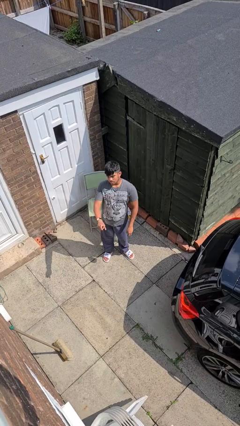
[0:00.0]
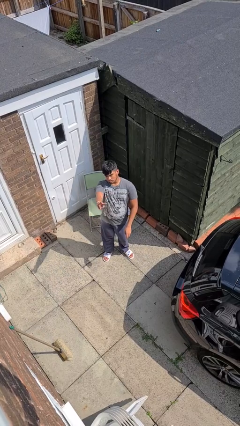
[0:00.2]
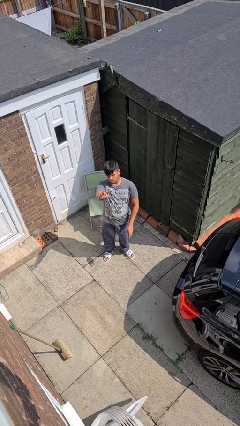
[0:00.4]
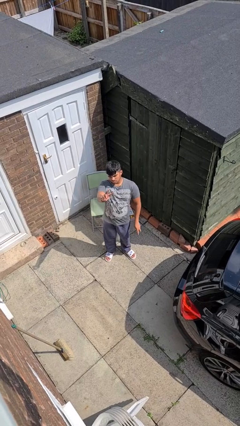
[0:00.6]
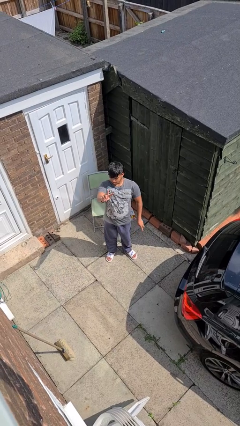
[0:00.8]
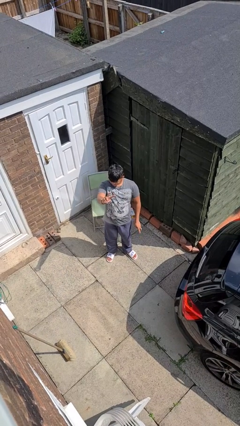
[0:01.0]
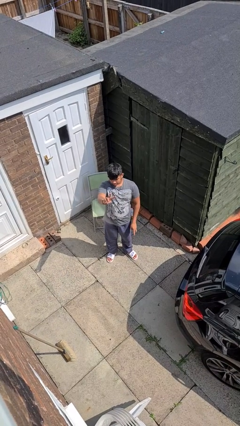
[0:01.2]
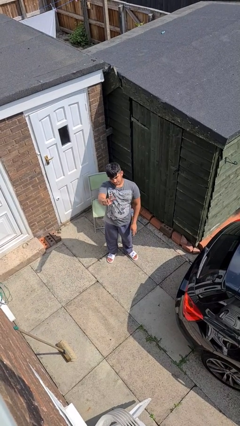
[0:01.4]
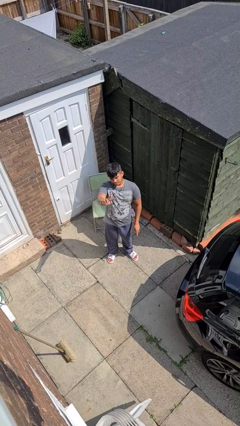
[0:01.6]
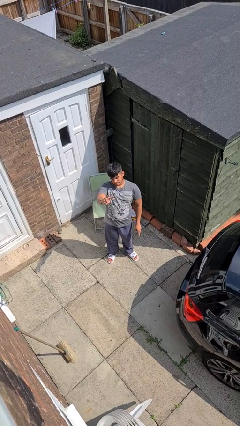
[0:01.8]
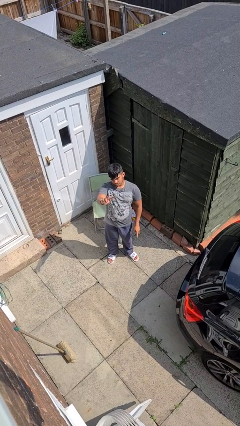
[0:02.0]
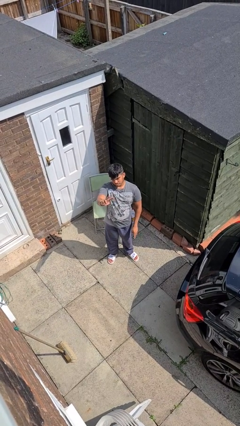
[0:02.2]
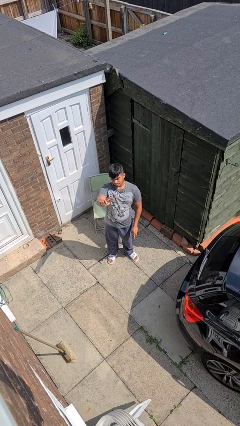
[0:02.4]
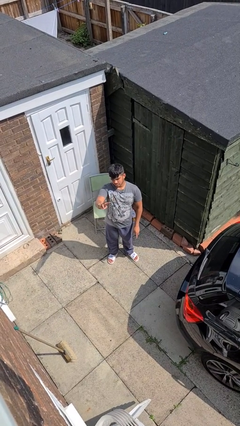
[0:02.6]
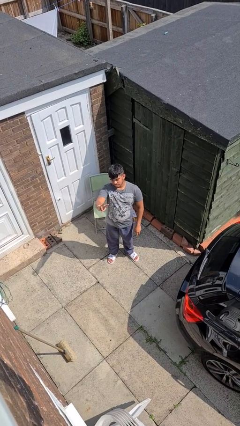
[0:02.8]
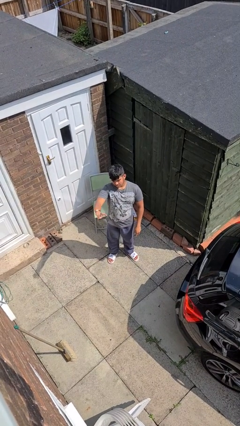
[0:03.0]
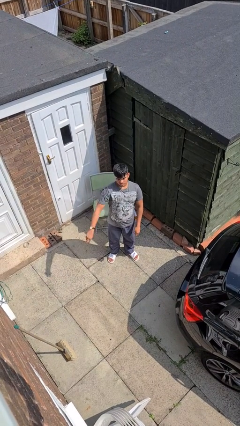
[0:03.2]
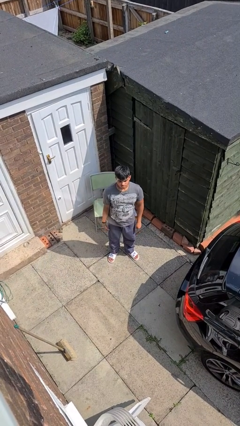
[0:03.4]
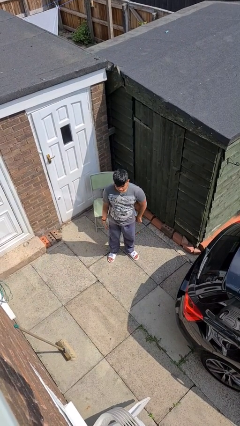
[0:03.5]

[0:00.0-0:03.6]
person gestures peace

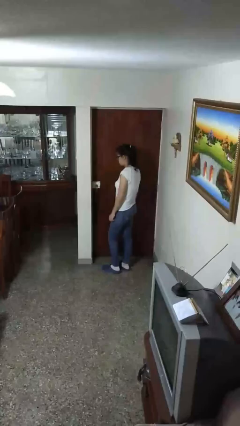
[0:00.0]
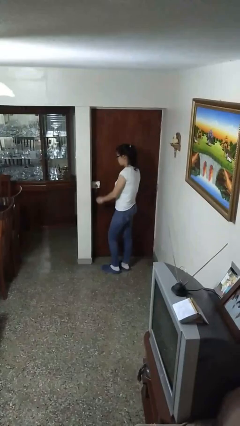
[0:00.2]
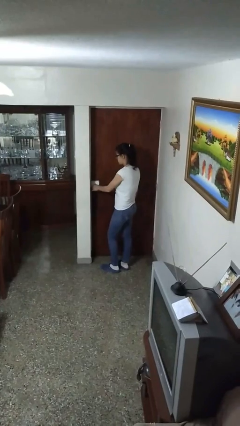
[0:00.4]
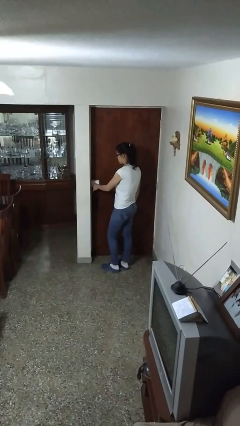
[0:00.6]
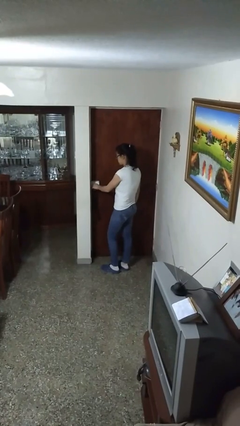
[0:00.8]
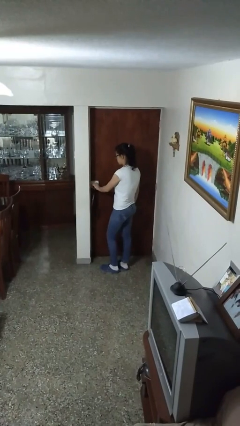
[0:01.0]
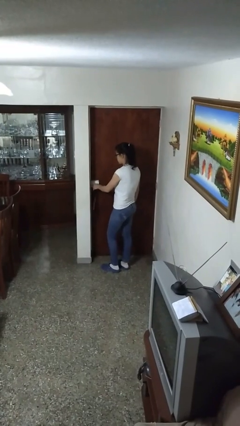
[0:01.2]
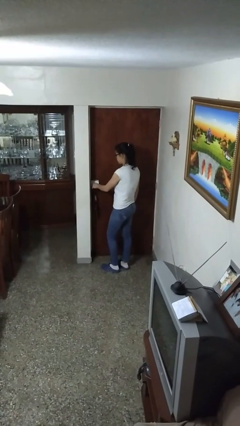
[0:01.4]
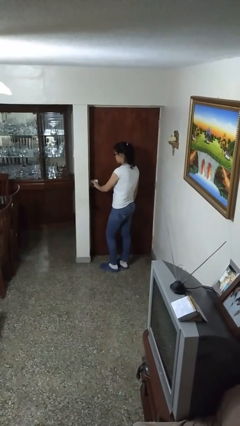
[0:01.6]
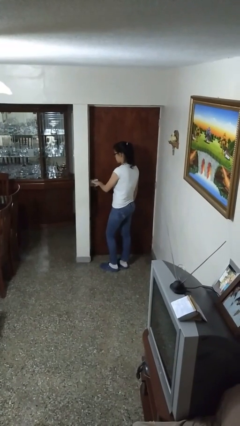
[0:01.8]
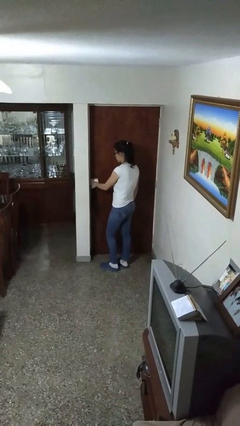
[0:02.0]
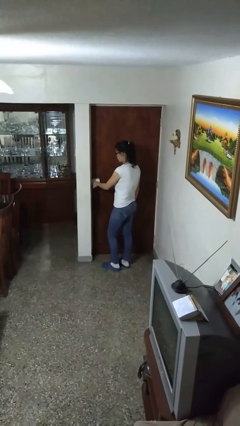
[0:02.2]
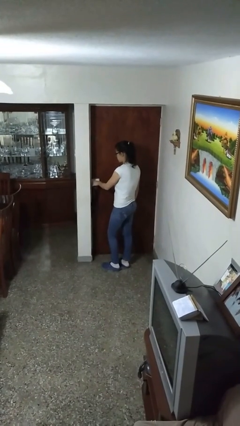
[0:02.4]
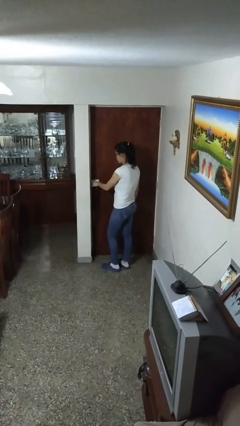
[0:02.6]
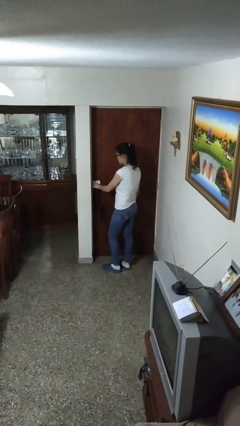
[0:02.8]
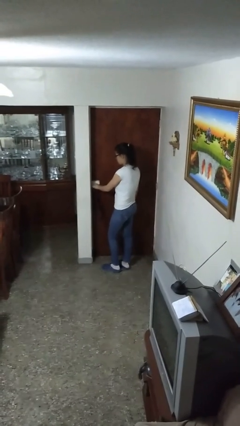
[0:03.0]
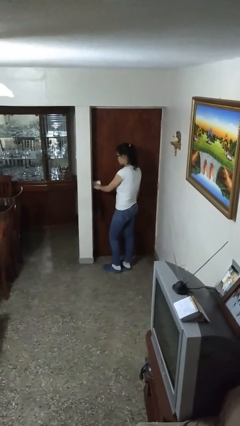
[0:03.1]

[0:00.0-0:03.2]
person unlocks door with keys

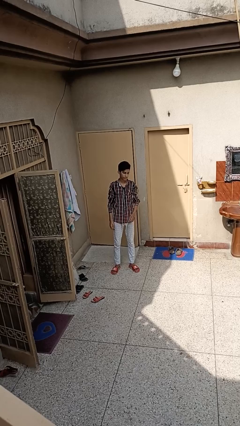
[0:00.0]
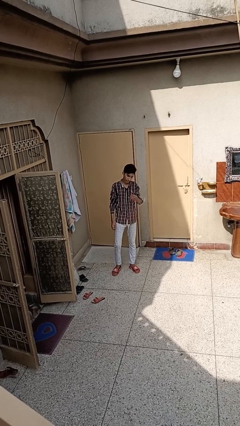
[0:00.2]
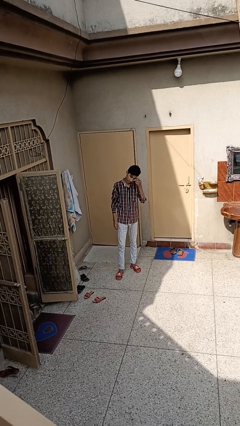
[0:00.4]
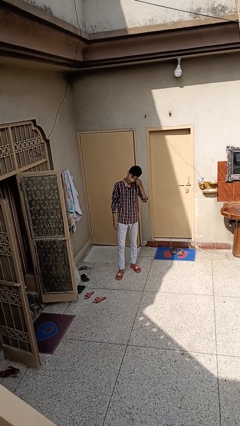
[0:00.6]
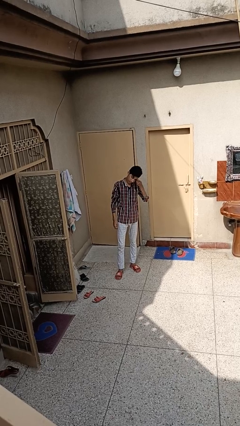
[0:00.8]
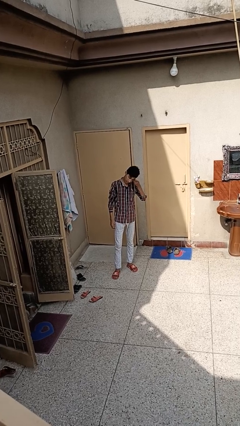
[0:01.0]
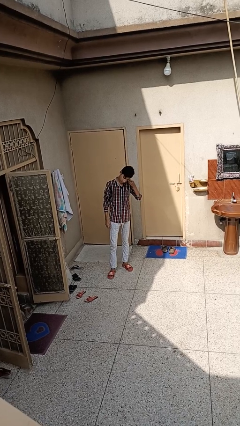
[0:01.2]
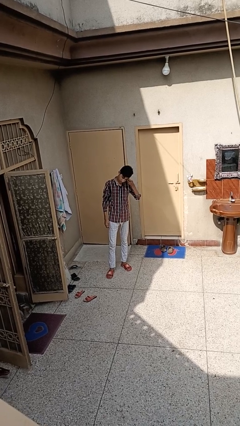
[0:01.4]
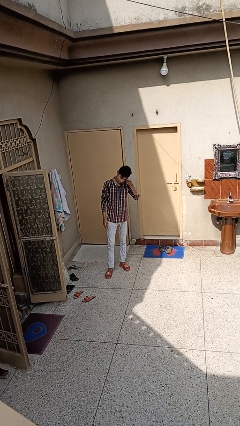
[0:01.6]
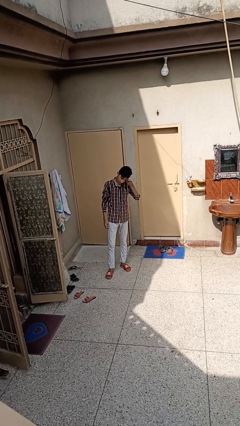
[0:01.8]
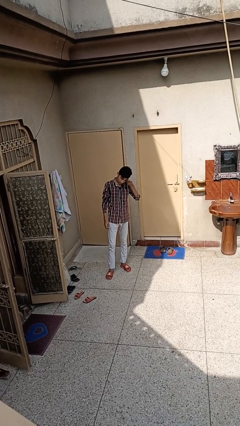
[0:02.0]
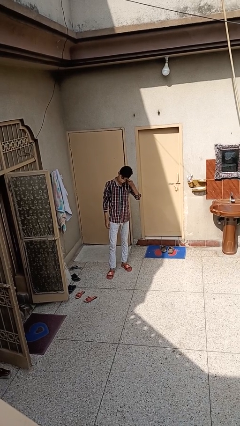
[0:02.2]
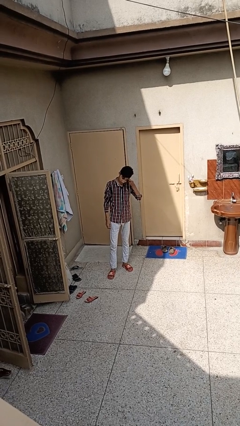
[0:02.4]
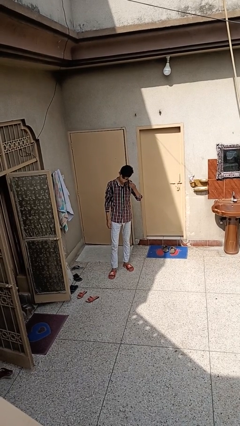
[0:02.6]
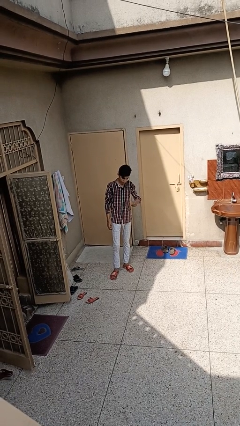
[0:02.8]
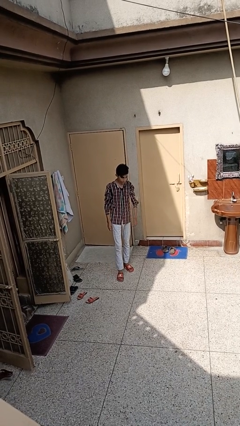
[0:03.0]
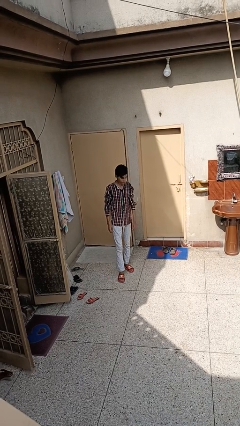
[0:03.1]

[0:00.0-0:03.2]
person scratches face

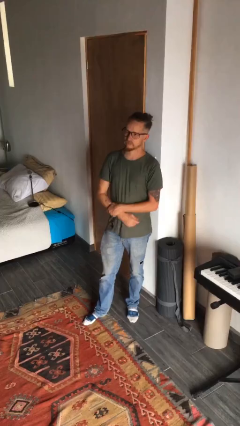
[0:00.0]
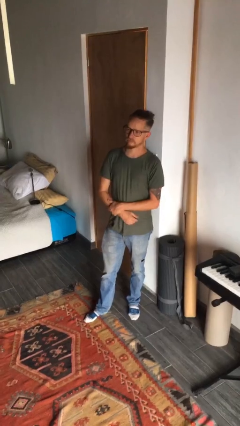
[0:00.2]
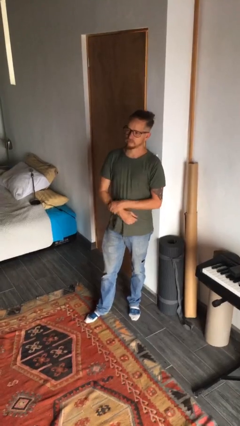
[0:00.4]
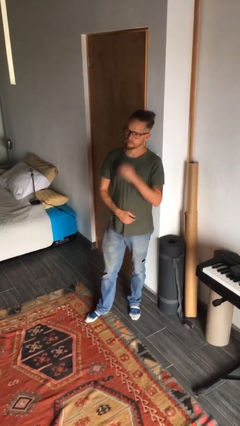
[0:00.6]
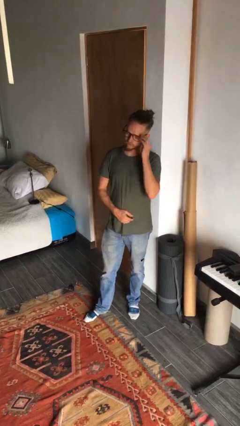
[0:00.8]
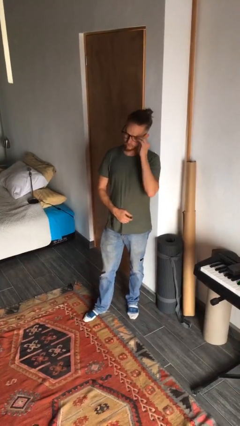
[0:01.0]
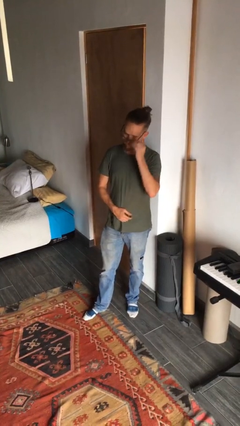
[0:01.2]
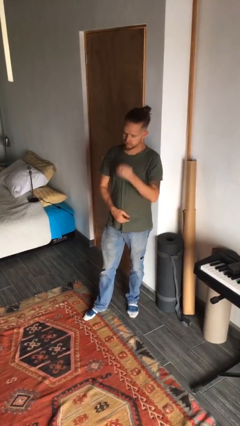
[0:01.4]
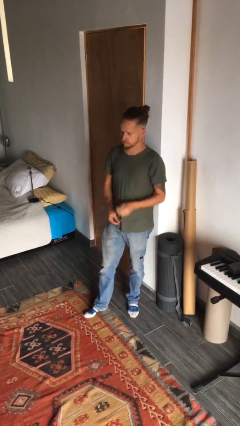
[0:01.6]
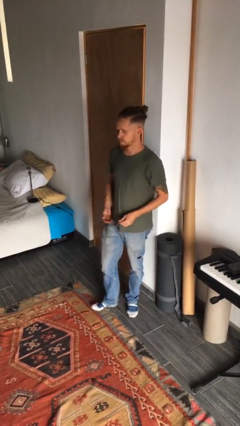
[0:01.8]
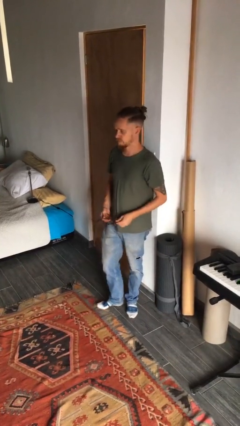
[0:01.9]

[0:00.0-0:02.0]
person takes off glasses

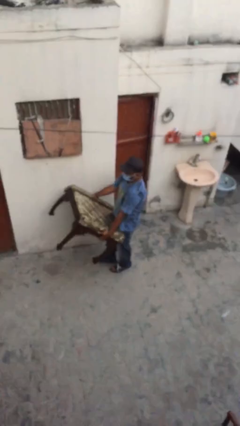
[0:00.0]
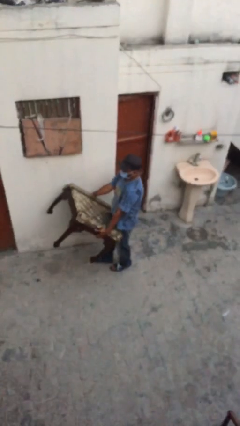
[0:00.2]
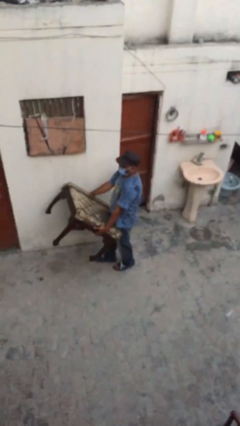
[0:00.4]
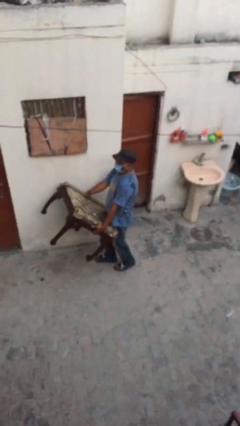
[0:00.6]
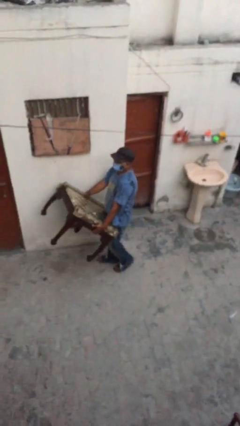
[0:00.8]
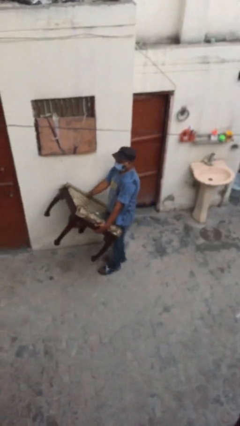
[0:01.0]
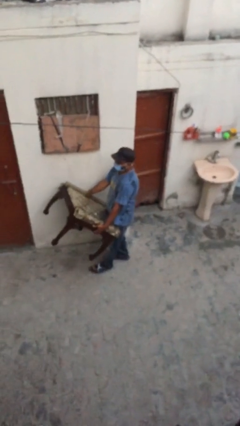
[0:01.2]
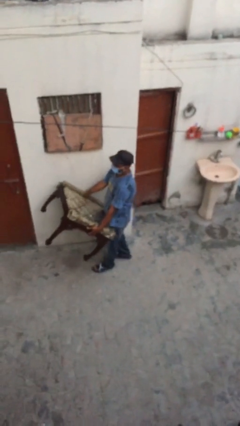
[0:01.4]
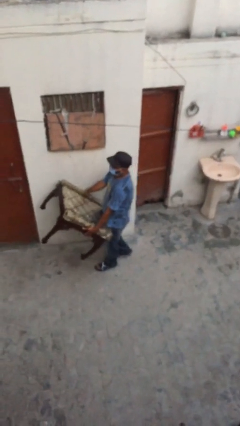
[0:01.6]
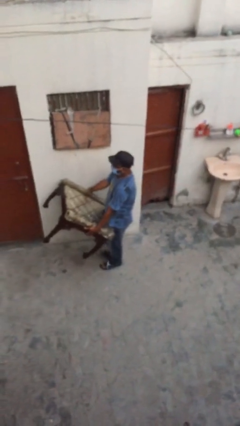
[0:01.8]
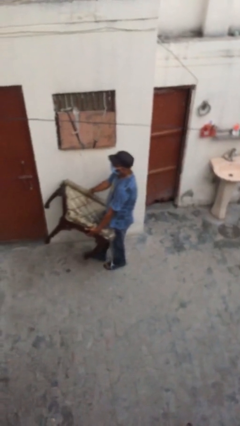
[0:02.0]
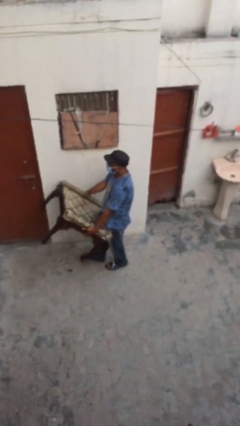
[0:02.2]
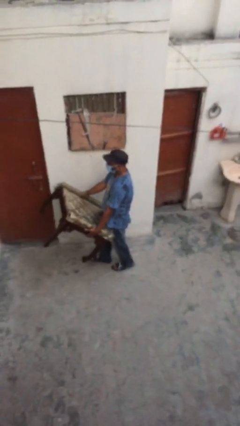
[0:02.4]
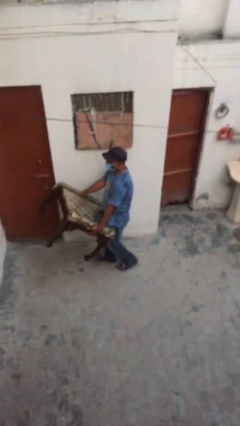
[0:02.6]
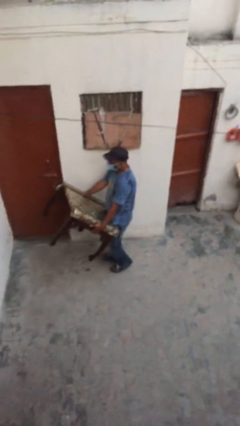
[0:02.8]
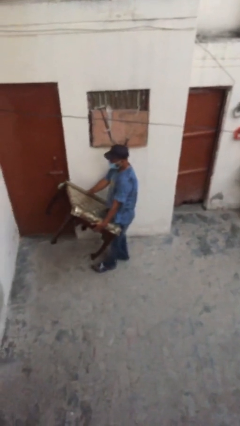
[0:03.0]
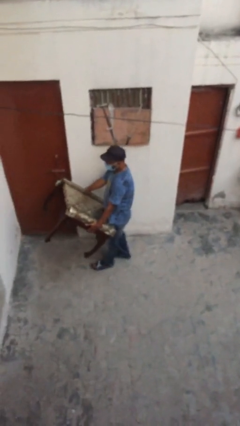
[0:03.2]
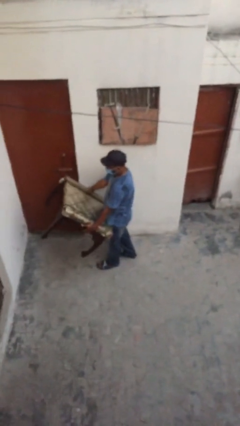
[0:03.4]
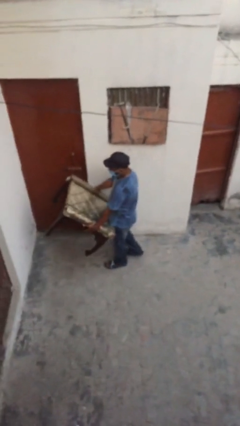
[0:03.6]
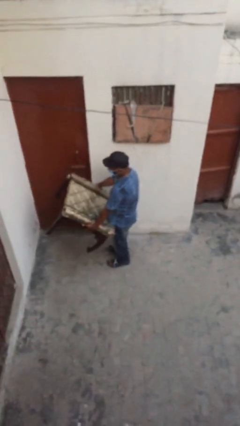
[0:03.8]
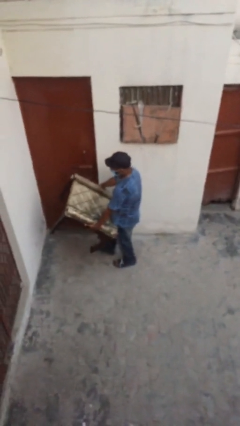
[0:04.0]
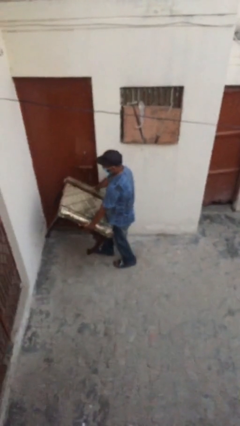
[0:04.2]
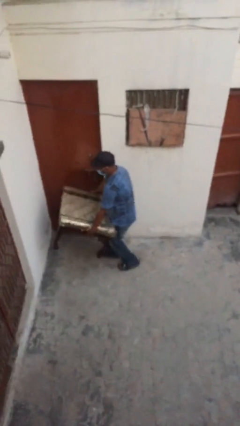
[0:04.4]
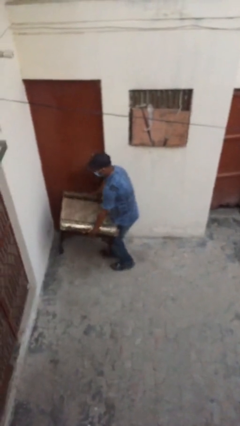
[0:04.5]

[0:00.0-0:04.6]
person carries heavy object

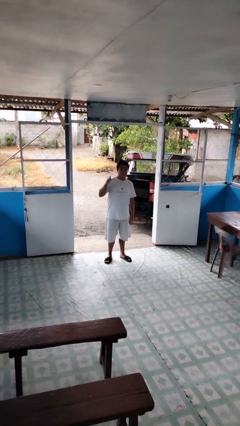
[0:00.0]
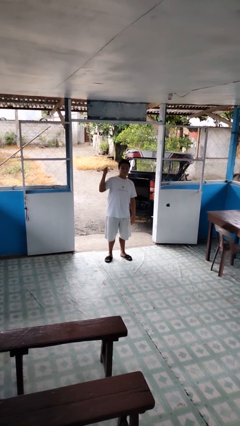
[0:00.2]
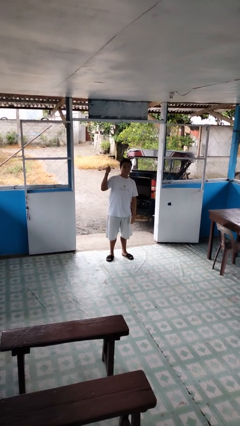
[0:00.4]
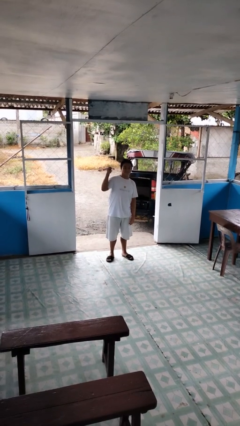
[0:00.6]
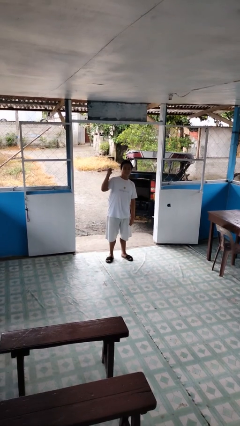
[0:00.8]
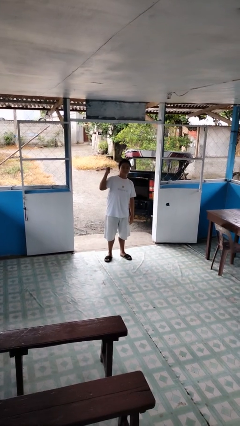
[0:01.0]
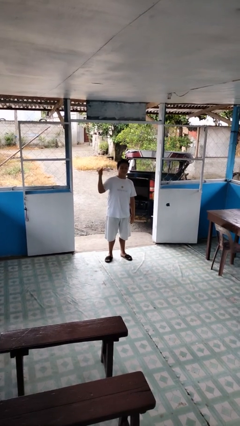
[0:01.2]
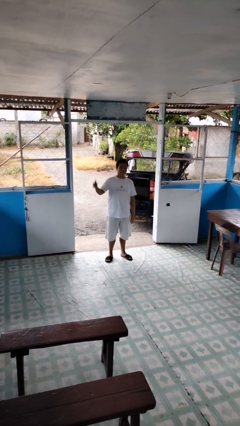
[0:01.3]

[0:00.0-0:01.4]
person gestures behind me
